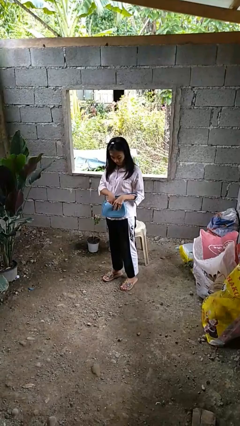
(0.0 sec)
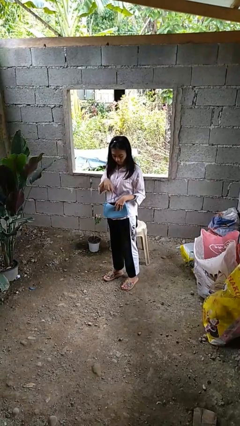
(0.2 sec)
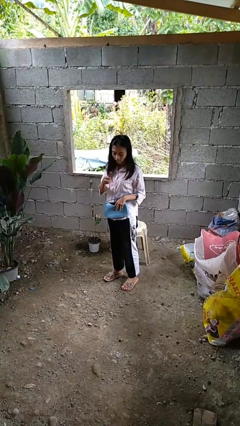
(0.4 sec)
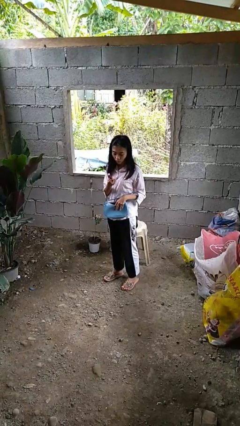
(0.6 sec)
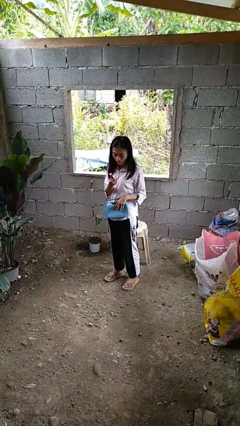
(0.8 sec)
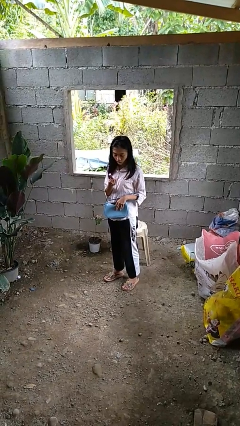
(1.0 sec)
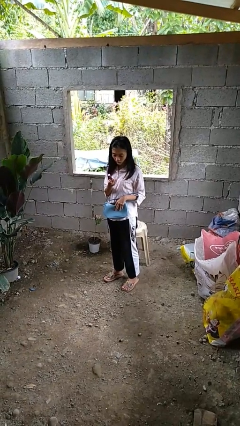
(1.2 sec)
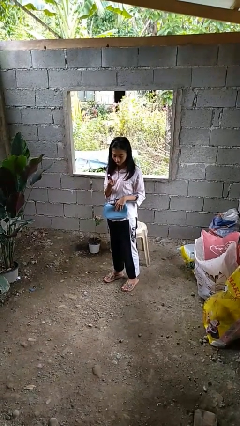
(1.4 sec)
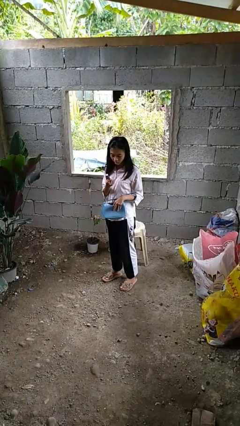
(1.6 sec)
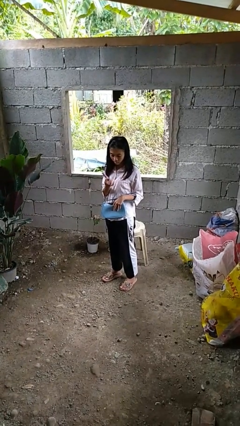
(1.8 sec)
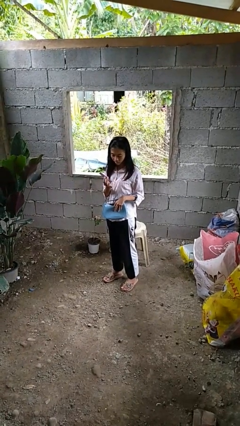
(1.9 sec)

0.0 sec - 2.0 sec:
person takes object from purse

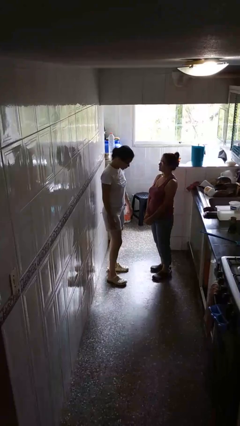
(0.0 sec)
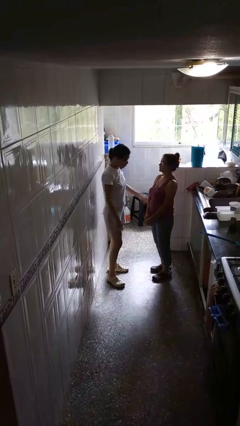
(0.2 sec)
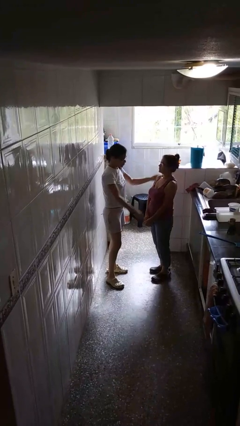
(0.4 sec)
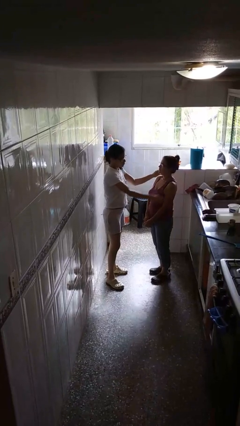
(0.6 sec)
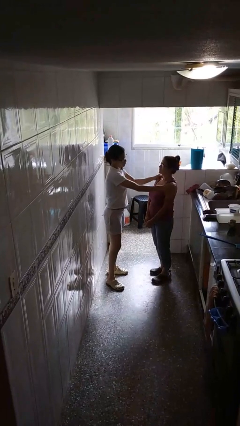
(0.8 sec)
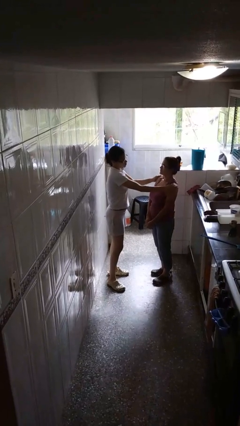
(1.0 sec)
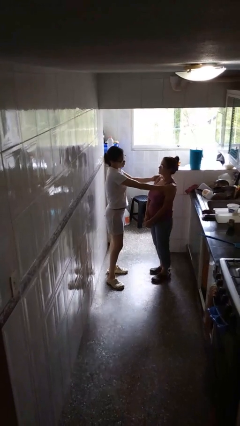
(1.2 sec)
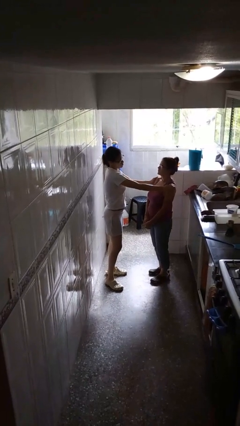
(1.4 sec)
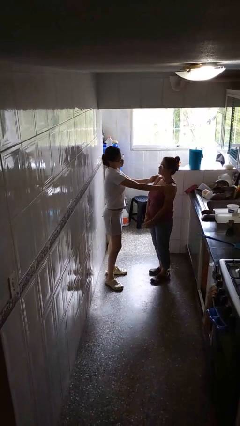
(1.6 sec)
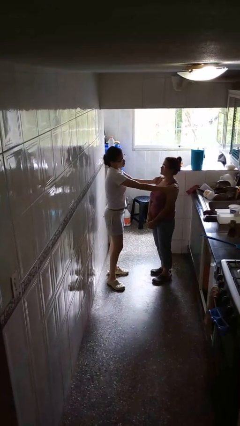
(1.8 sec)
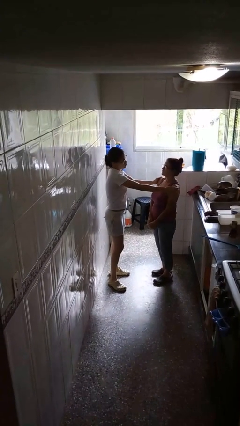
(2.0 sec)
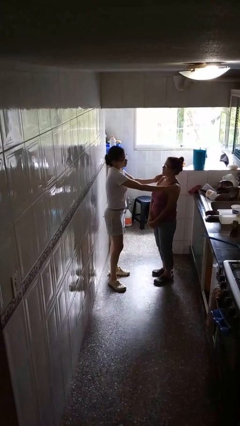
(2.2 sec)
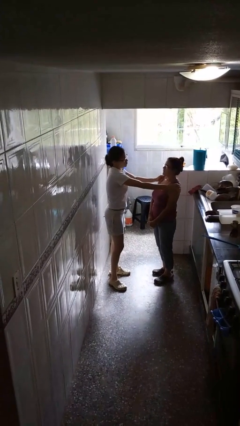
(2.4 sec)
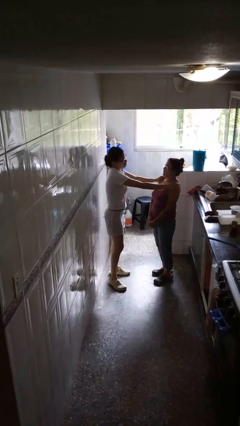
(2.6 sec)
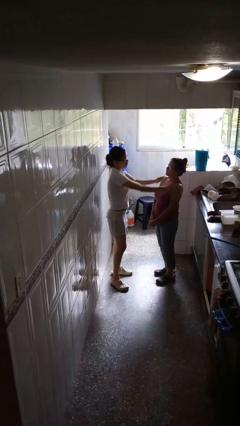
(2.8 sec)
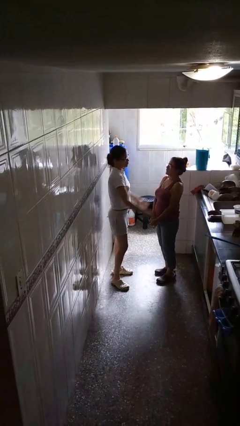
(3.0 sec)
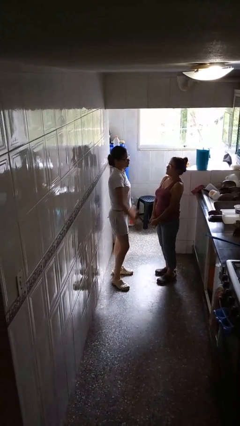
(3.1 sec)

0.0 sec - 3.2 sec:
person pounds shoulders of person

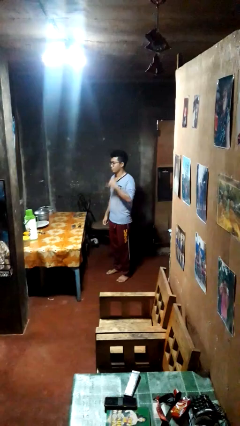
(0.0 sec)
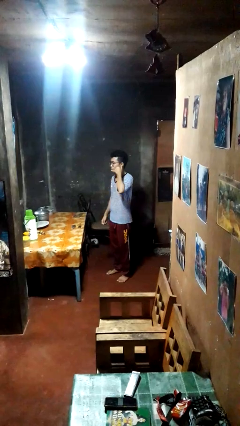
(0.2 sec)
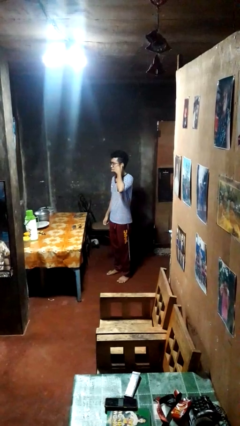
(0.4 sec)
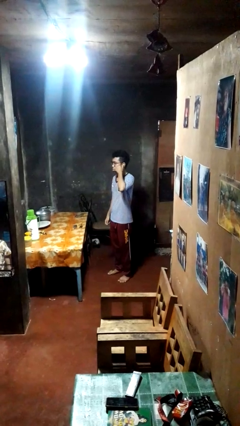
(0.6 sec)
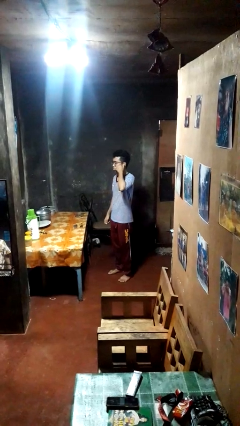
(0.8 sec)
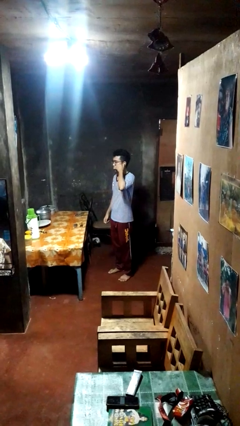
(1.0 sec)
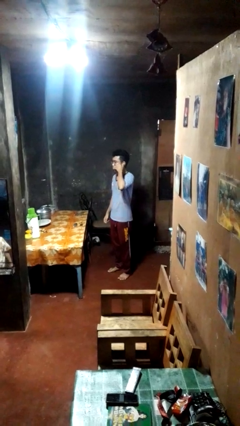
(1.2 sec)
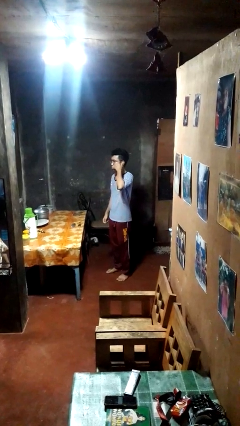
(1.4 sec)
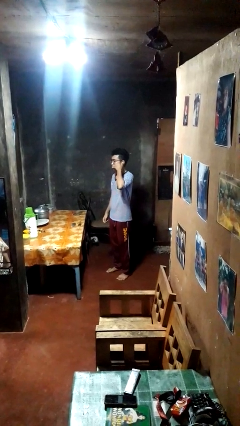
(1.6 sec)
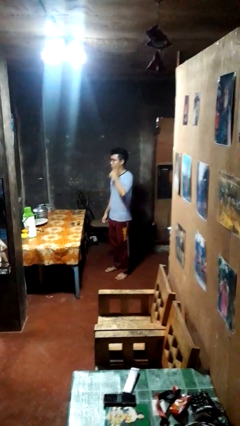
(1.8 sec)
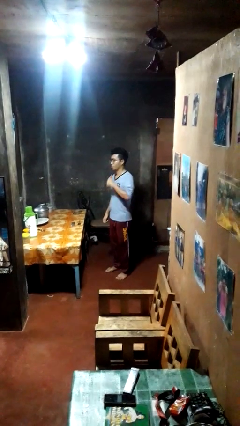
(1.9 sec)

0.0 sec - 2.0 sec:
person gestures call me

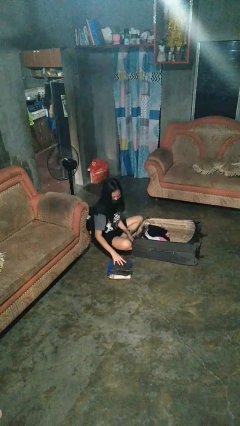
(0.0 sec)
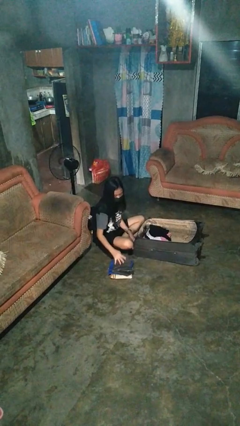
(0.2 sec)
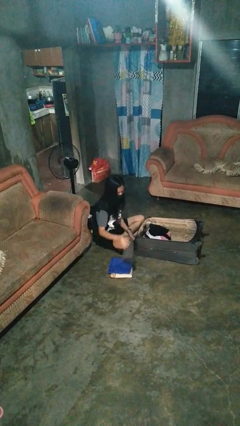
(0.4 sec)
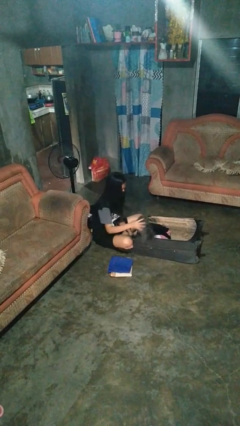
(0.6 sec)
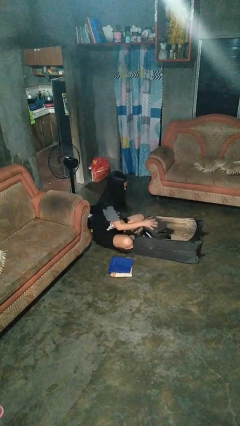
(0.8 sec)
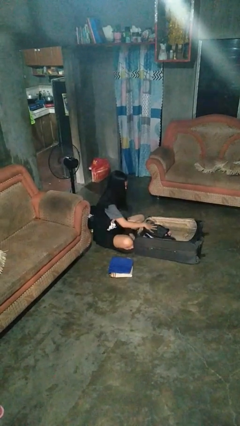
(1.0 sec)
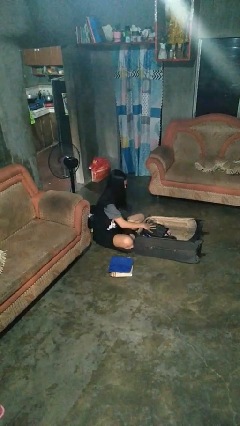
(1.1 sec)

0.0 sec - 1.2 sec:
person loads clothes into suitcase

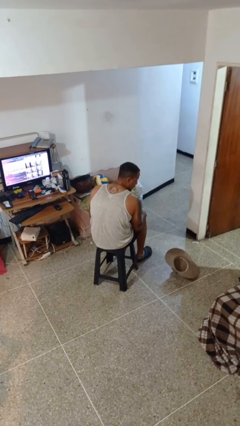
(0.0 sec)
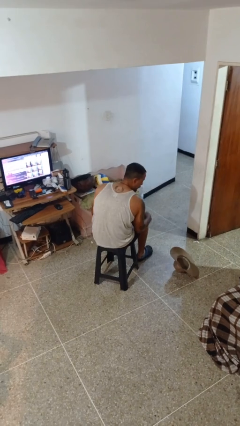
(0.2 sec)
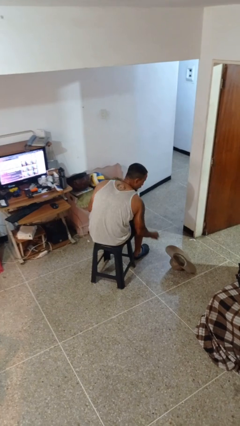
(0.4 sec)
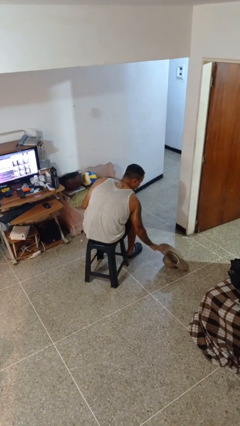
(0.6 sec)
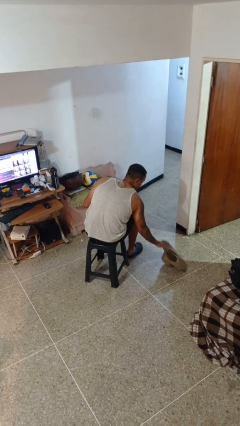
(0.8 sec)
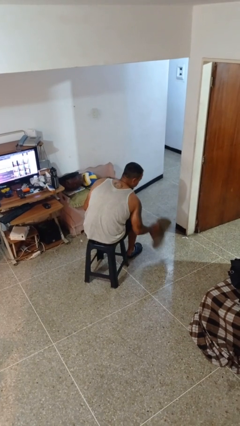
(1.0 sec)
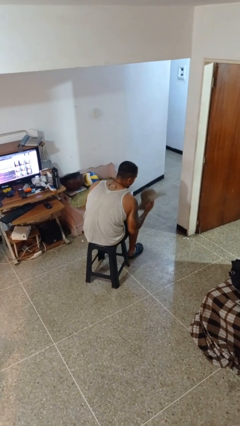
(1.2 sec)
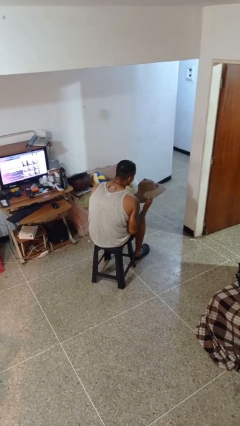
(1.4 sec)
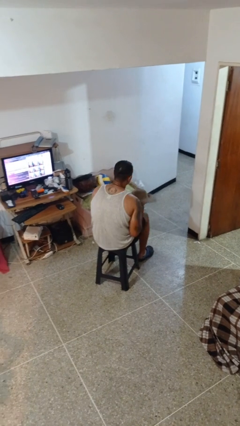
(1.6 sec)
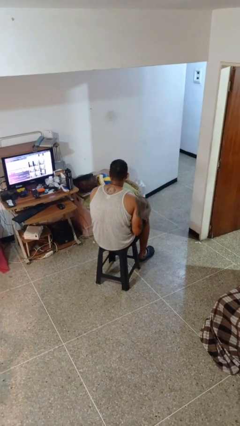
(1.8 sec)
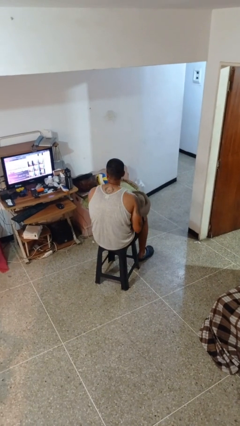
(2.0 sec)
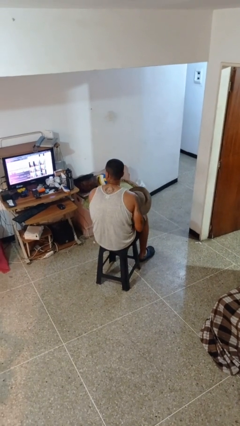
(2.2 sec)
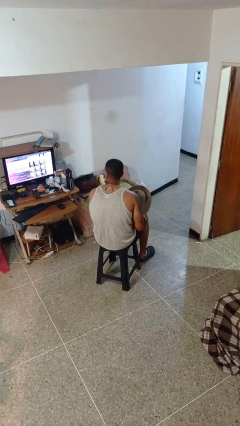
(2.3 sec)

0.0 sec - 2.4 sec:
person picks up object from floor

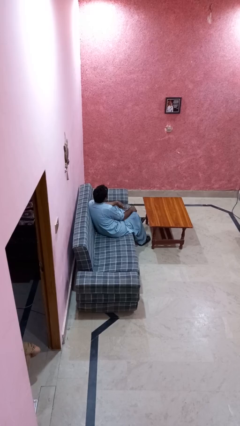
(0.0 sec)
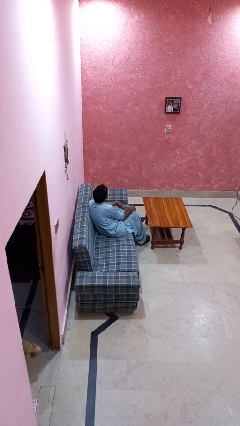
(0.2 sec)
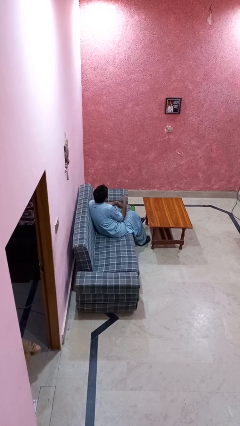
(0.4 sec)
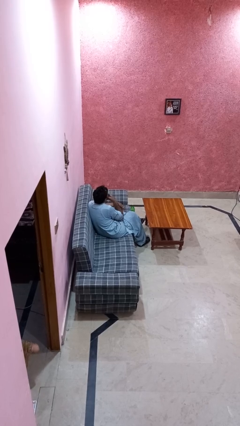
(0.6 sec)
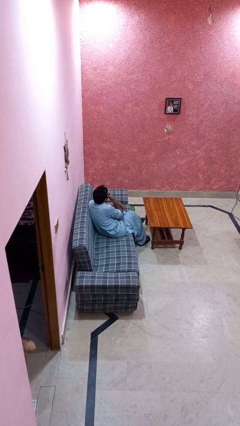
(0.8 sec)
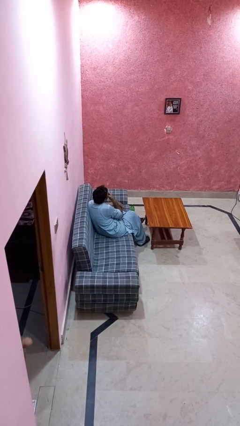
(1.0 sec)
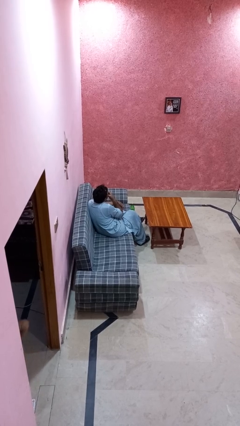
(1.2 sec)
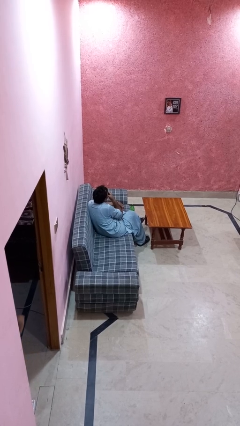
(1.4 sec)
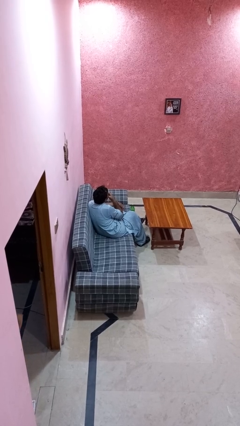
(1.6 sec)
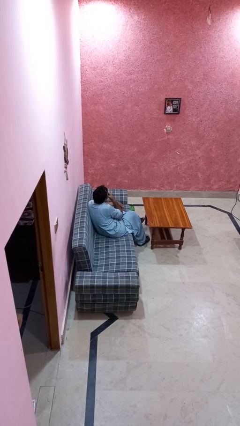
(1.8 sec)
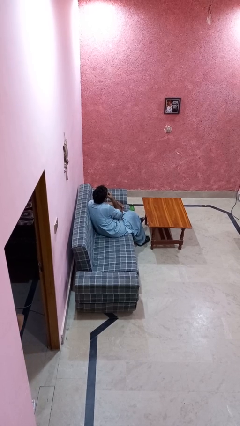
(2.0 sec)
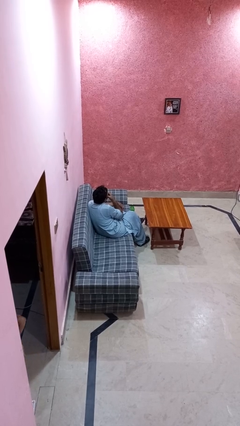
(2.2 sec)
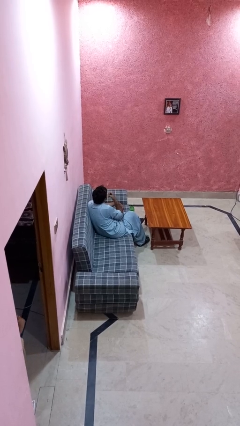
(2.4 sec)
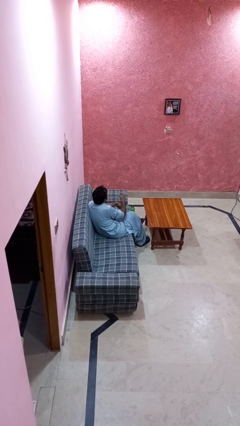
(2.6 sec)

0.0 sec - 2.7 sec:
person strokes chin

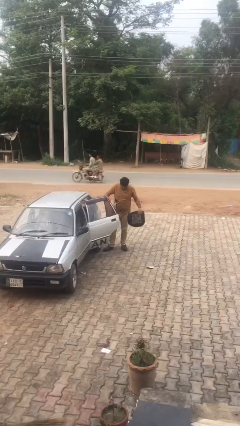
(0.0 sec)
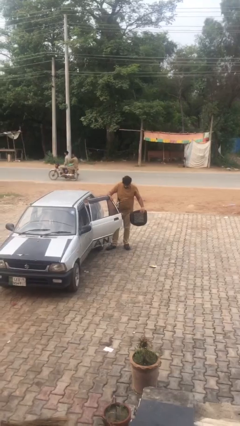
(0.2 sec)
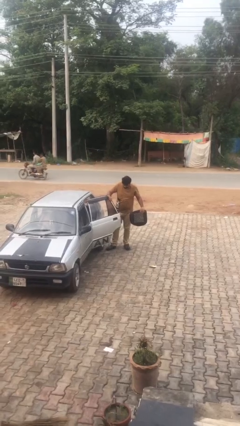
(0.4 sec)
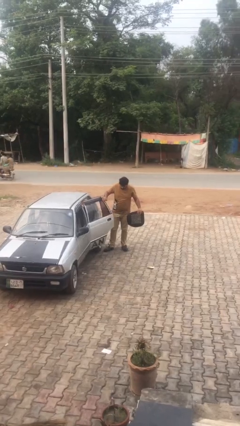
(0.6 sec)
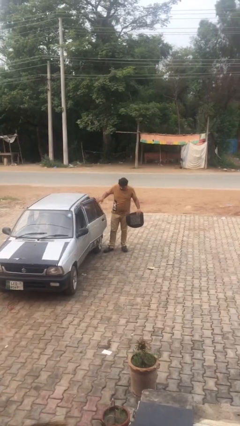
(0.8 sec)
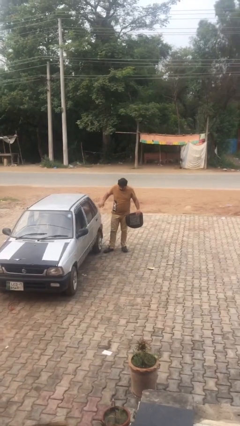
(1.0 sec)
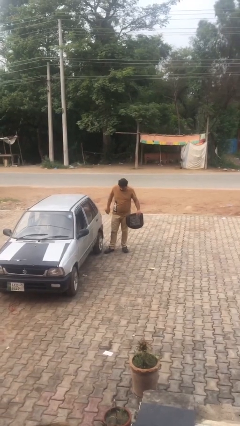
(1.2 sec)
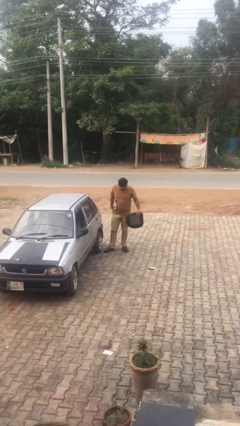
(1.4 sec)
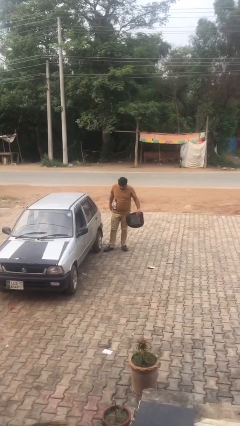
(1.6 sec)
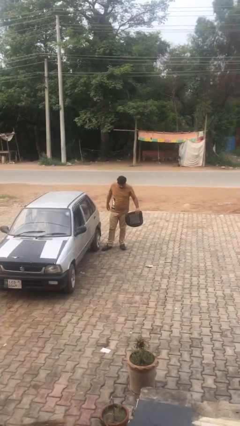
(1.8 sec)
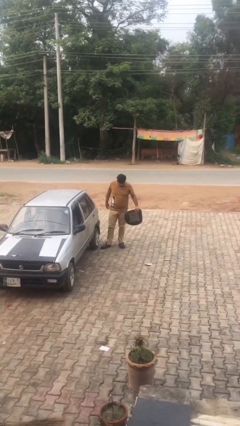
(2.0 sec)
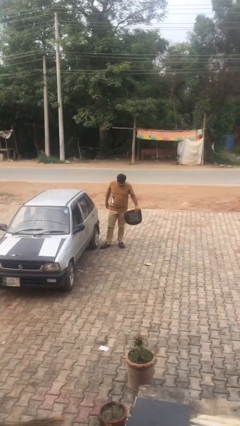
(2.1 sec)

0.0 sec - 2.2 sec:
person closes car door

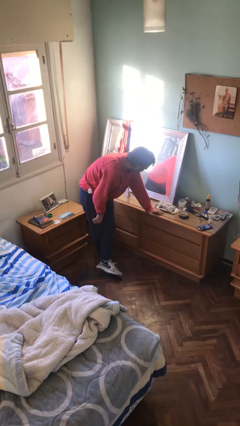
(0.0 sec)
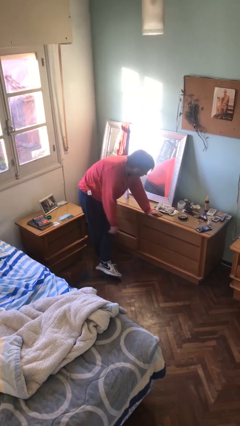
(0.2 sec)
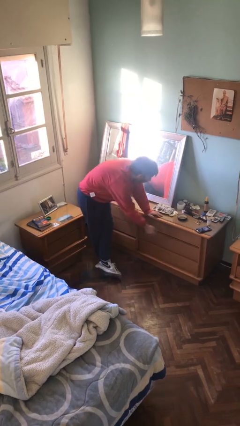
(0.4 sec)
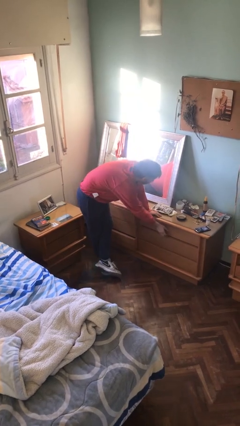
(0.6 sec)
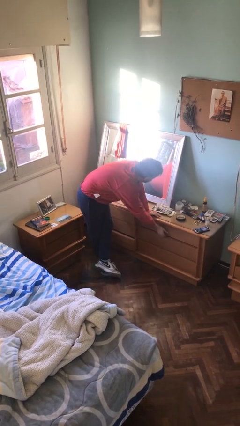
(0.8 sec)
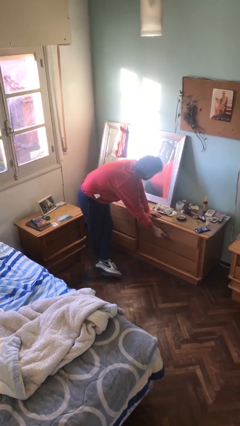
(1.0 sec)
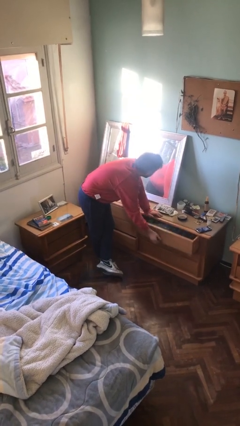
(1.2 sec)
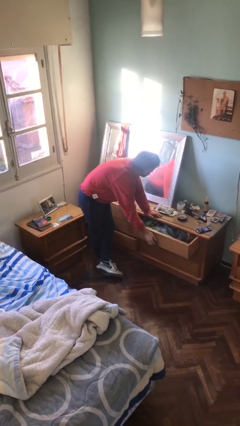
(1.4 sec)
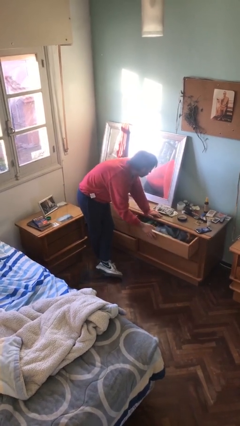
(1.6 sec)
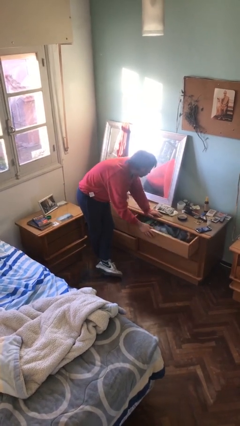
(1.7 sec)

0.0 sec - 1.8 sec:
person opens dresser drawer
